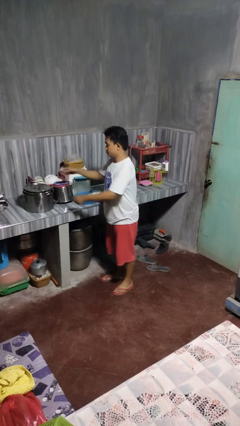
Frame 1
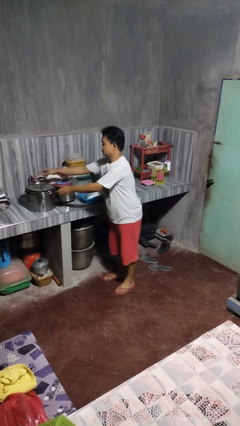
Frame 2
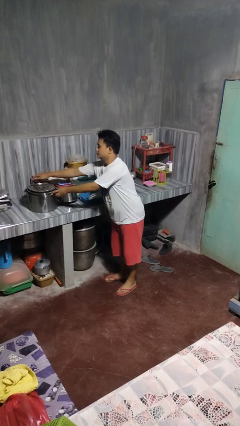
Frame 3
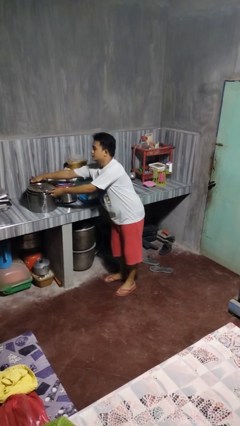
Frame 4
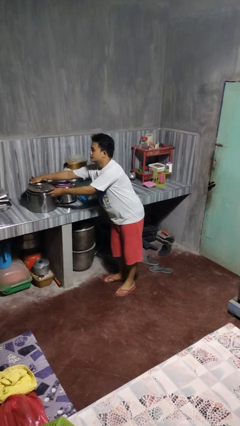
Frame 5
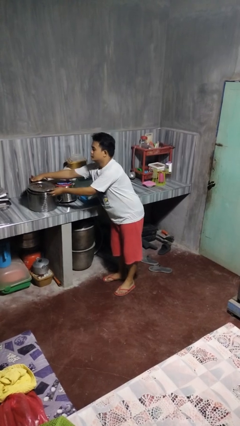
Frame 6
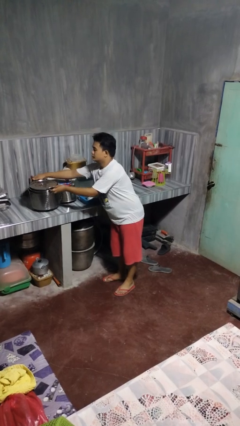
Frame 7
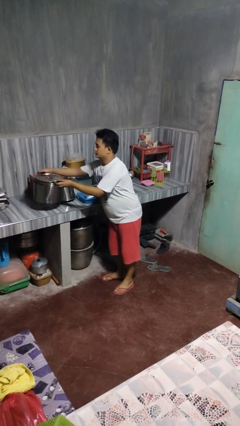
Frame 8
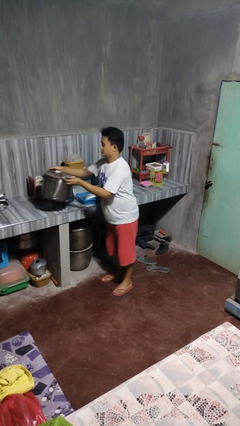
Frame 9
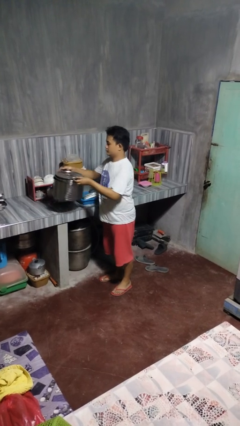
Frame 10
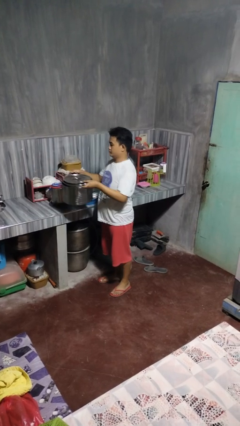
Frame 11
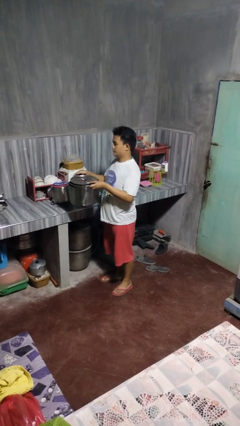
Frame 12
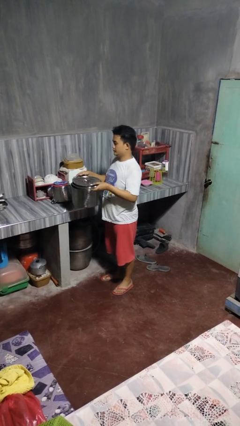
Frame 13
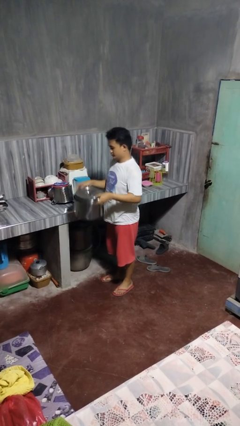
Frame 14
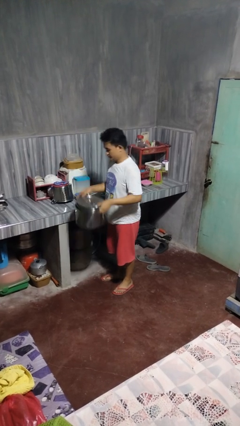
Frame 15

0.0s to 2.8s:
person picks up object from countertop

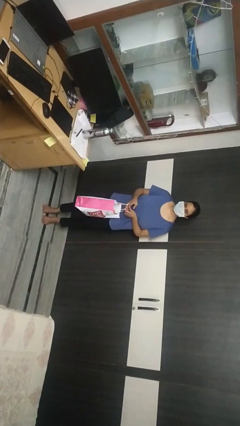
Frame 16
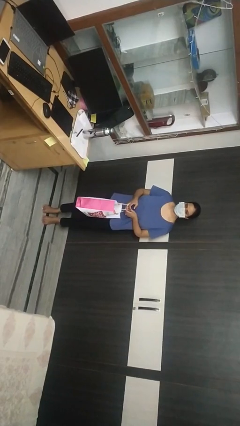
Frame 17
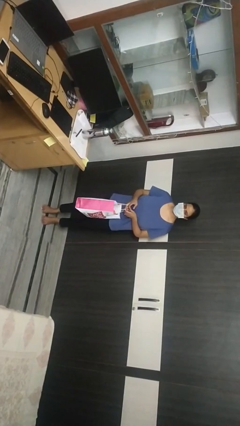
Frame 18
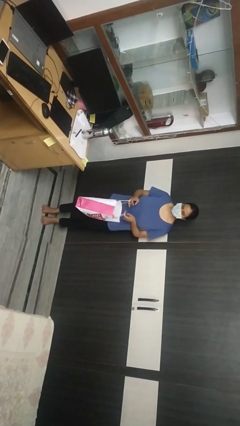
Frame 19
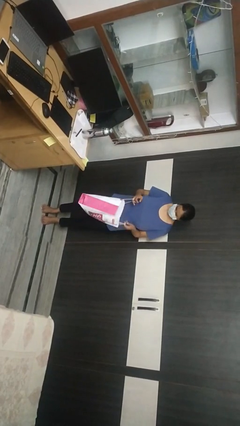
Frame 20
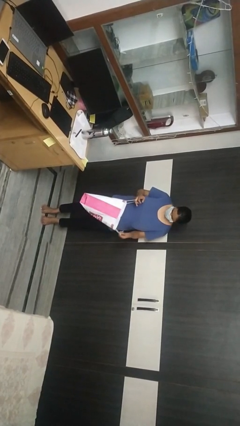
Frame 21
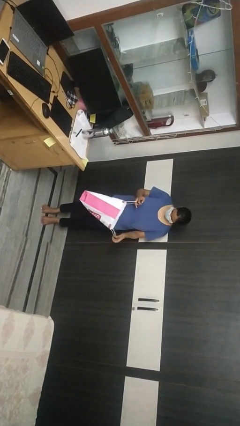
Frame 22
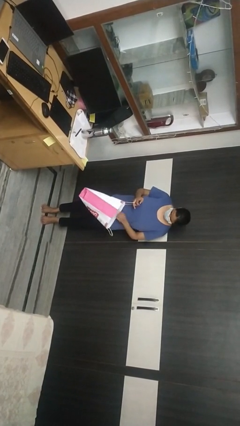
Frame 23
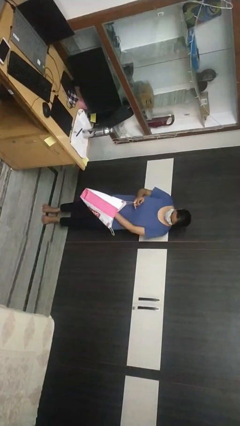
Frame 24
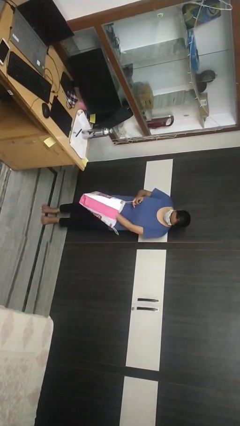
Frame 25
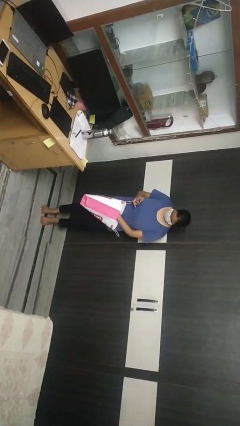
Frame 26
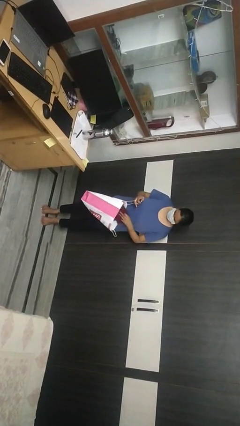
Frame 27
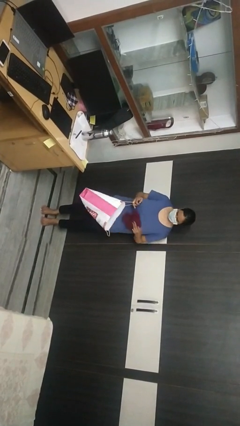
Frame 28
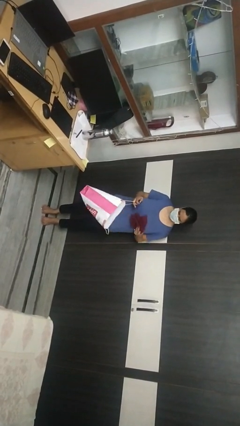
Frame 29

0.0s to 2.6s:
person takes object from bag

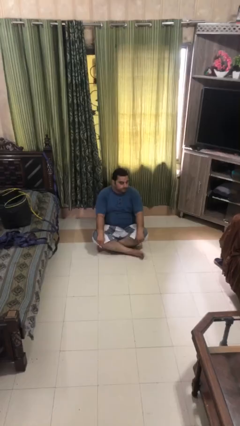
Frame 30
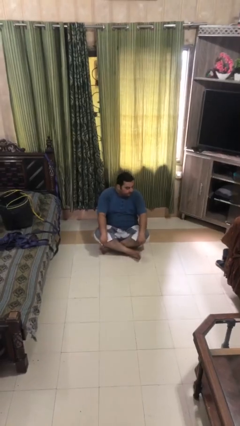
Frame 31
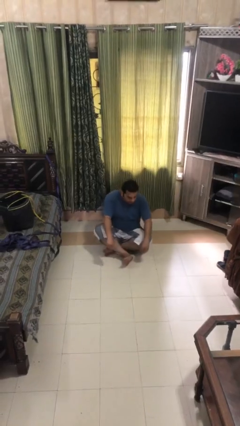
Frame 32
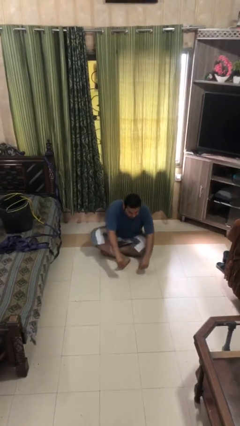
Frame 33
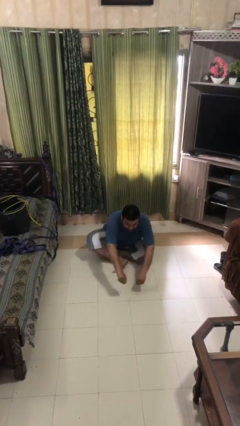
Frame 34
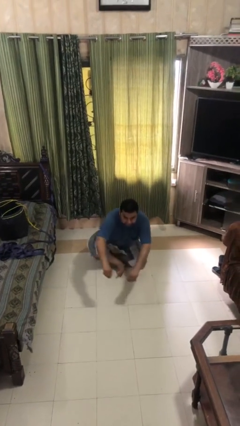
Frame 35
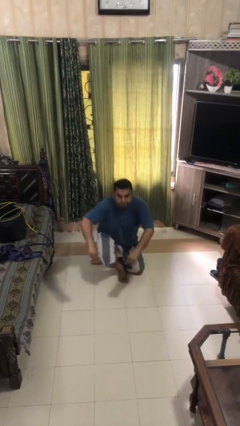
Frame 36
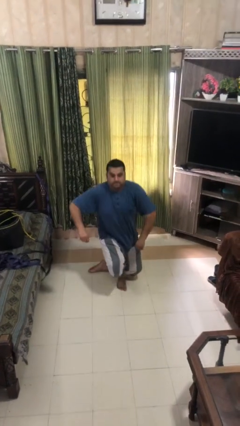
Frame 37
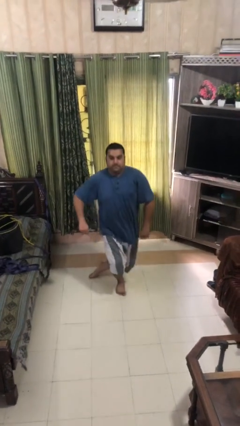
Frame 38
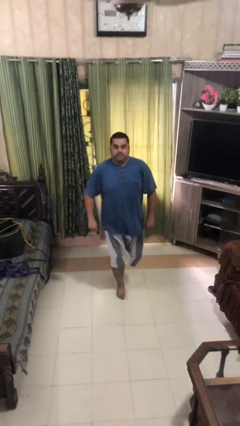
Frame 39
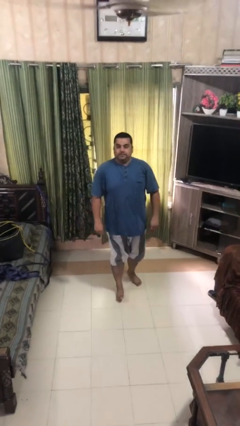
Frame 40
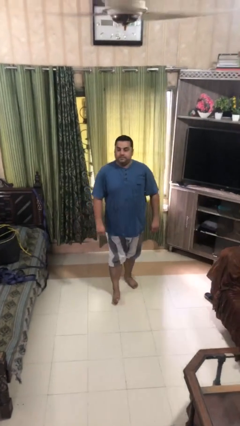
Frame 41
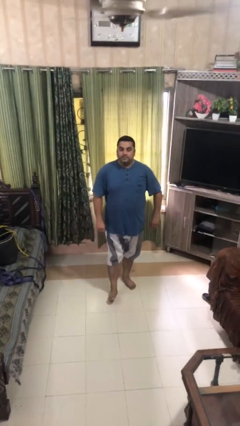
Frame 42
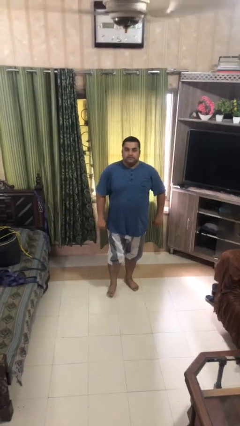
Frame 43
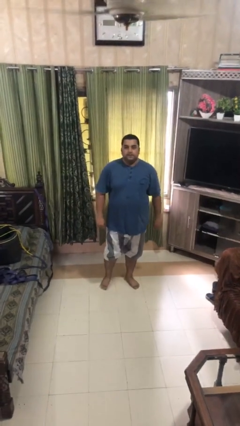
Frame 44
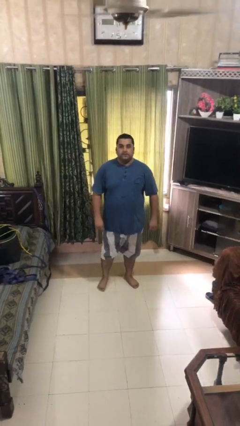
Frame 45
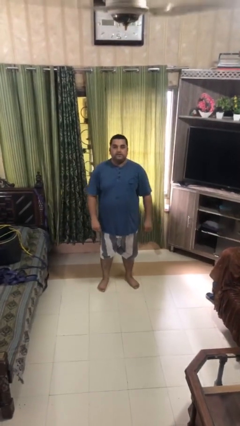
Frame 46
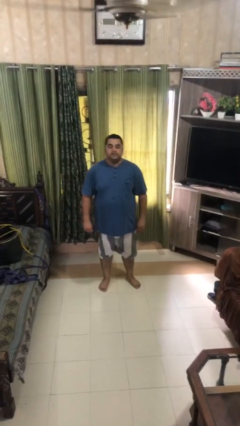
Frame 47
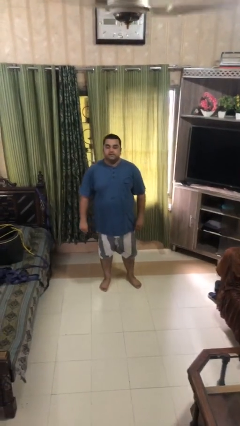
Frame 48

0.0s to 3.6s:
person stands up from floor

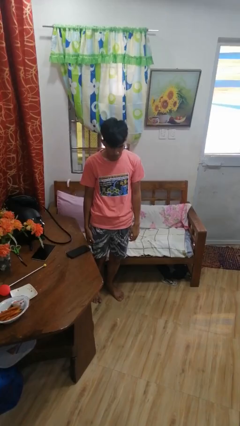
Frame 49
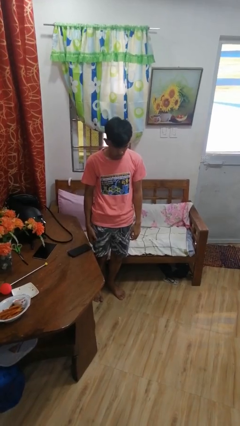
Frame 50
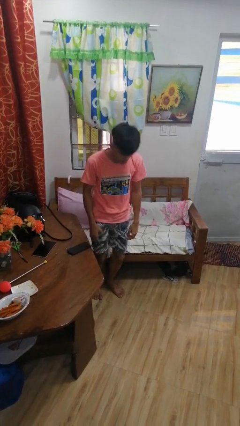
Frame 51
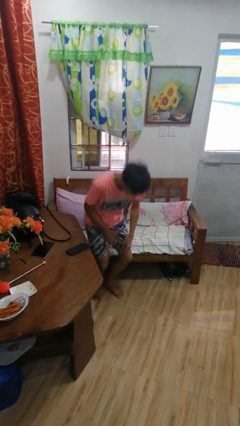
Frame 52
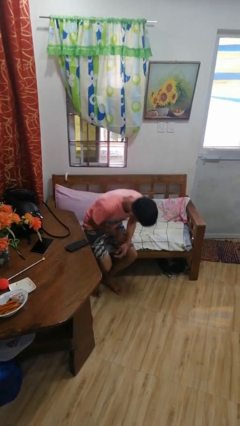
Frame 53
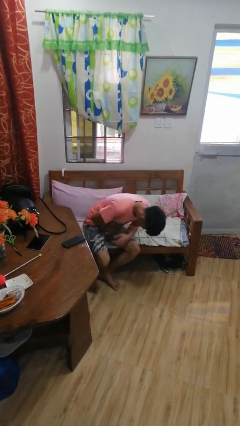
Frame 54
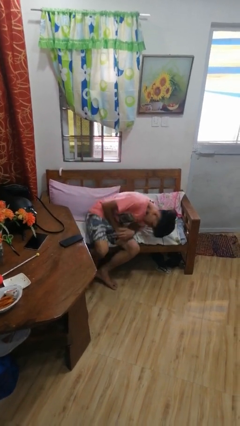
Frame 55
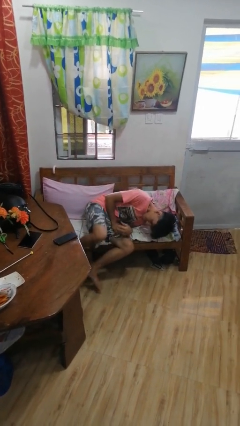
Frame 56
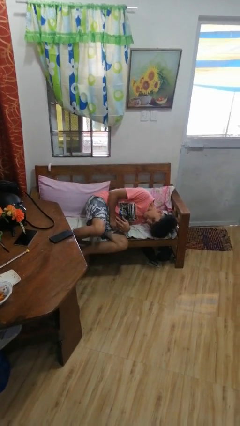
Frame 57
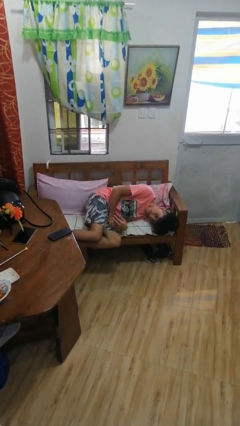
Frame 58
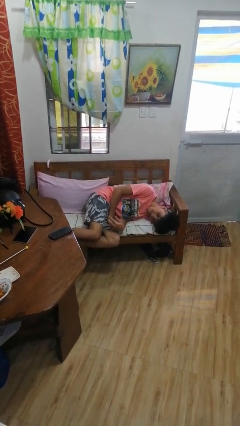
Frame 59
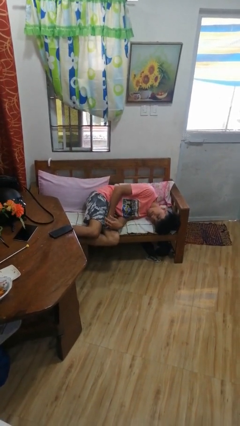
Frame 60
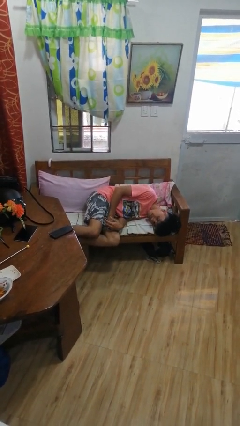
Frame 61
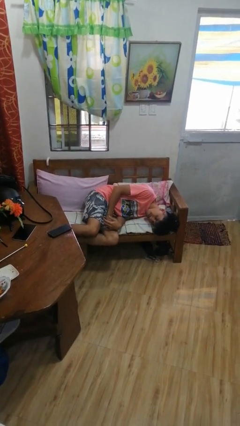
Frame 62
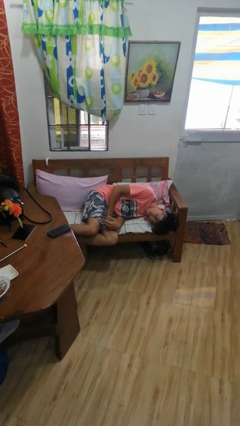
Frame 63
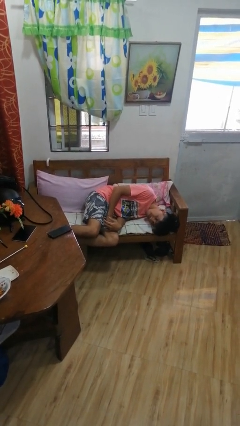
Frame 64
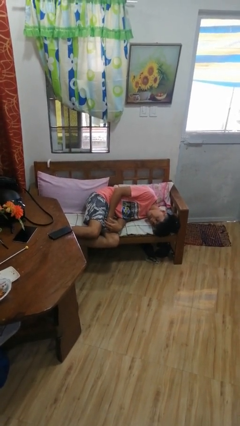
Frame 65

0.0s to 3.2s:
person lies down on couch

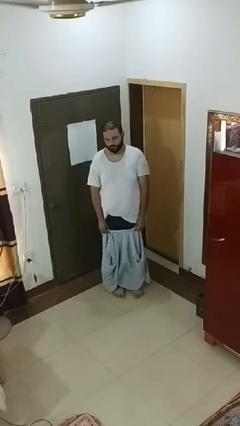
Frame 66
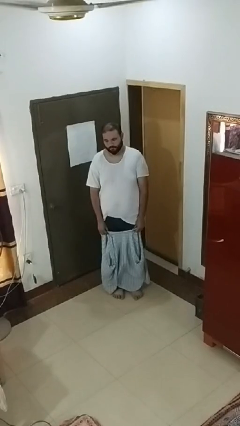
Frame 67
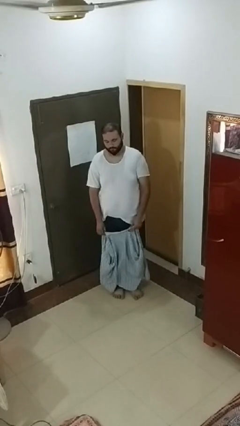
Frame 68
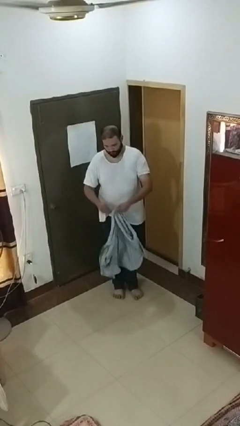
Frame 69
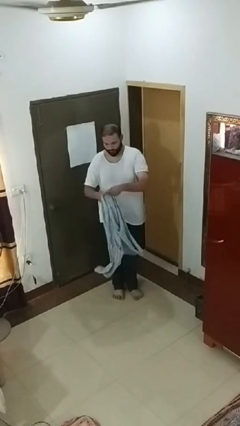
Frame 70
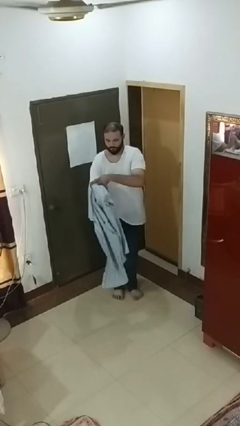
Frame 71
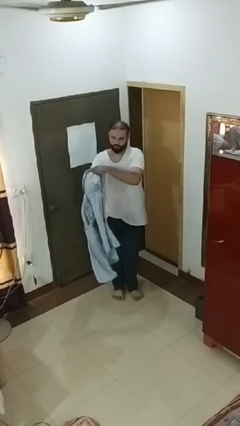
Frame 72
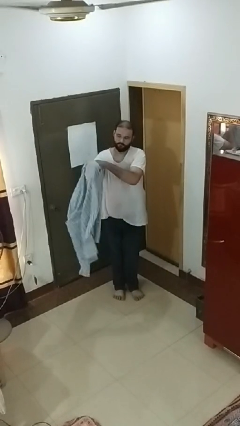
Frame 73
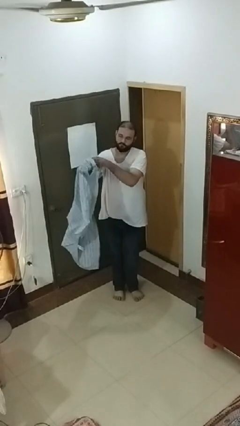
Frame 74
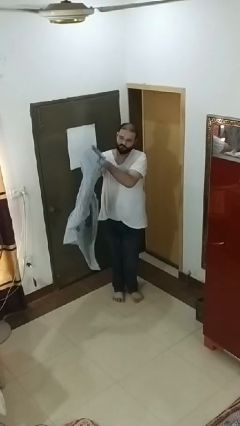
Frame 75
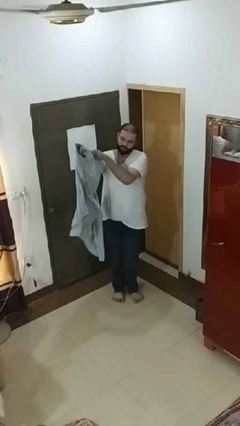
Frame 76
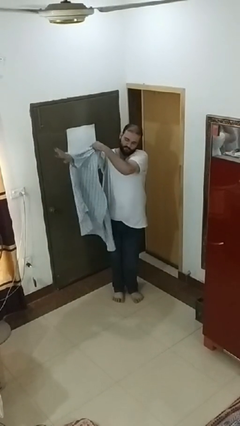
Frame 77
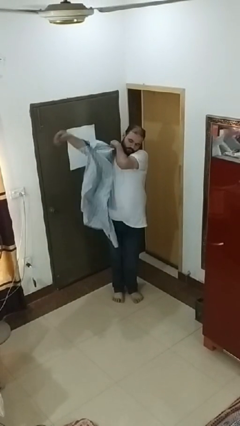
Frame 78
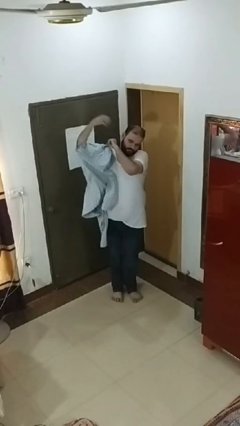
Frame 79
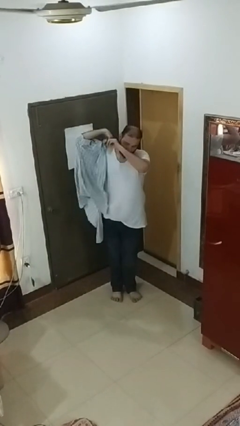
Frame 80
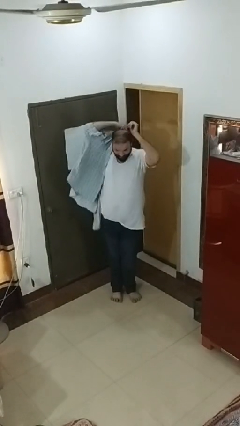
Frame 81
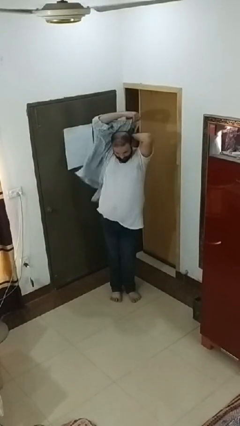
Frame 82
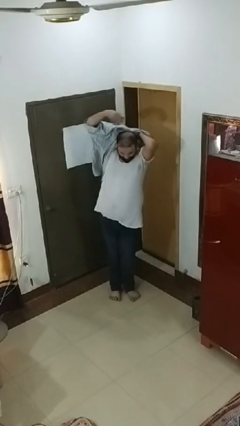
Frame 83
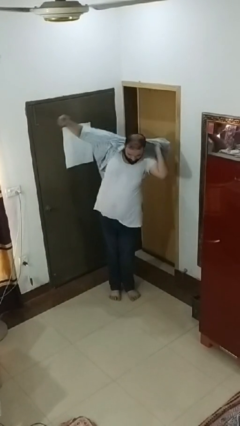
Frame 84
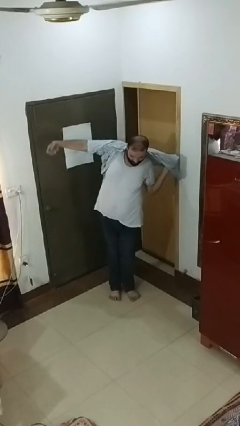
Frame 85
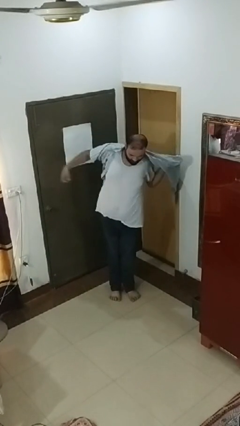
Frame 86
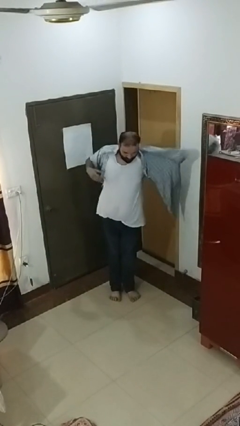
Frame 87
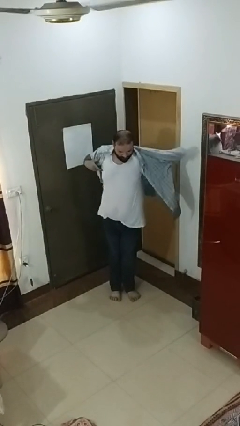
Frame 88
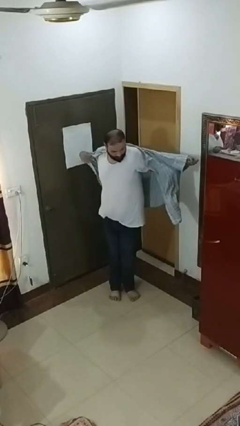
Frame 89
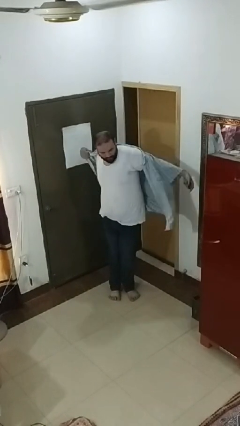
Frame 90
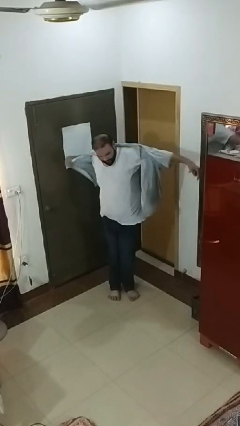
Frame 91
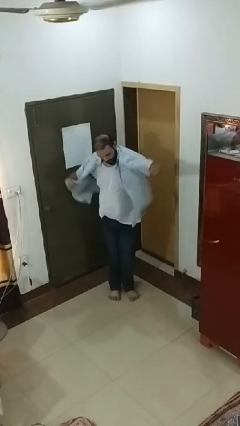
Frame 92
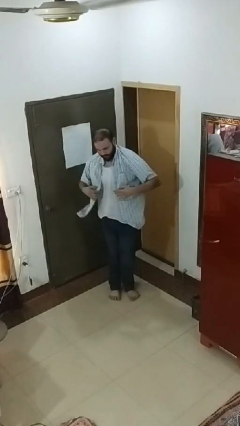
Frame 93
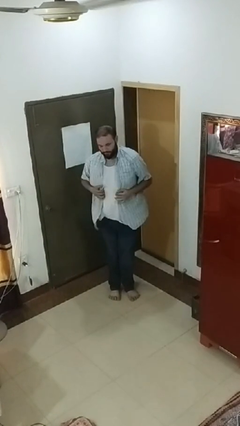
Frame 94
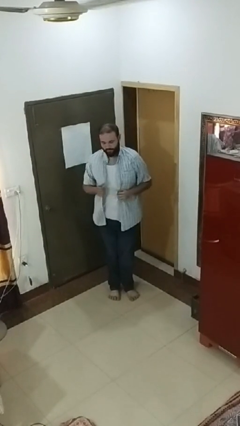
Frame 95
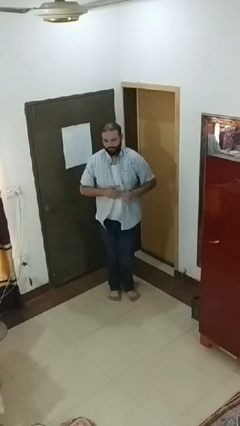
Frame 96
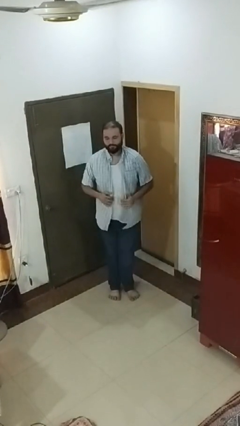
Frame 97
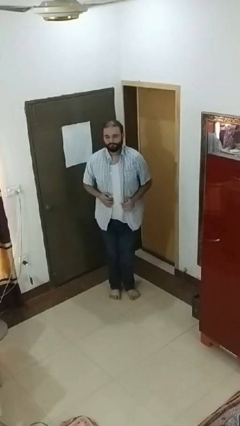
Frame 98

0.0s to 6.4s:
person puts on shirt
